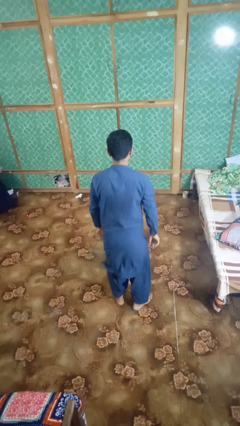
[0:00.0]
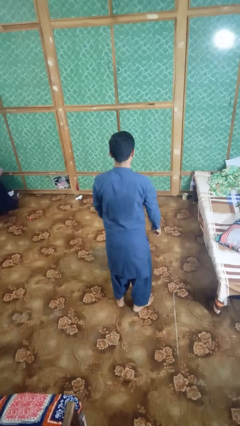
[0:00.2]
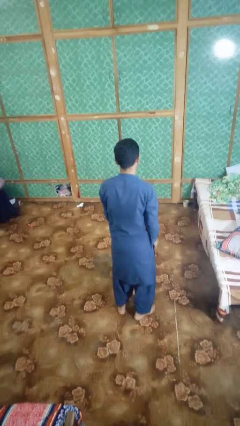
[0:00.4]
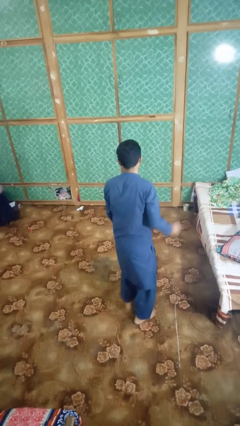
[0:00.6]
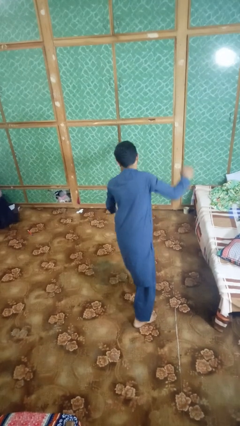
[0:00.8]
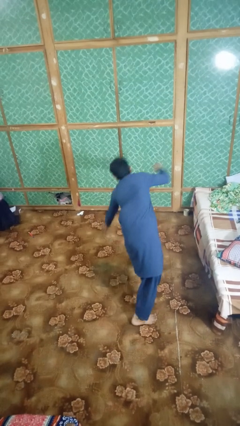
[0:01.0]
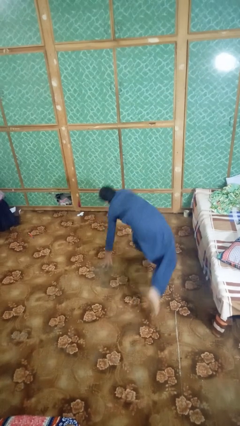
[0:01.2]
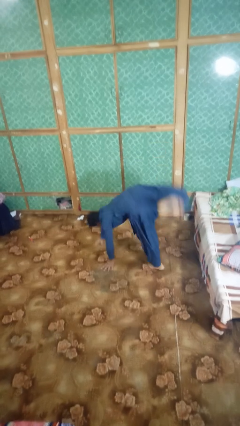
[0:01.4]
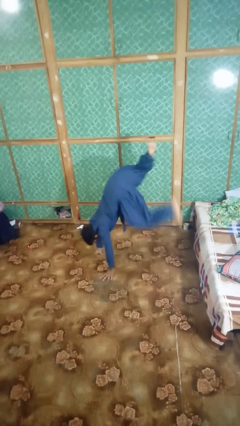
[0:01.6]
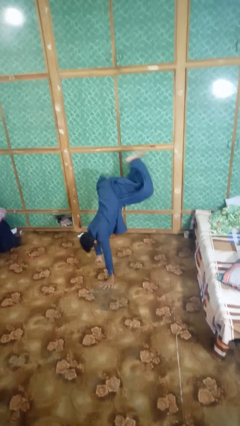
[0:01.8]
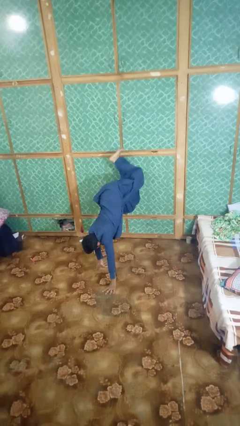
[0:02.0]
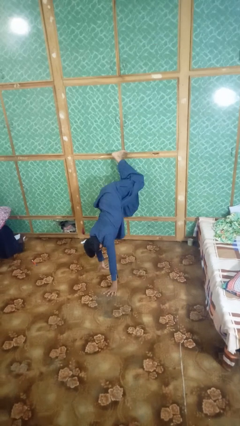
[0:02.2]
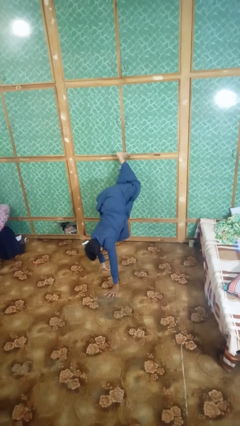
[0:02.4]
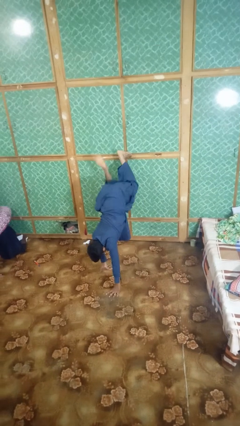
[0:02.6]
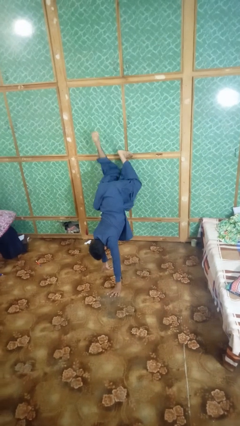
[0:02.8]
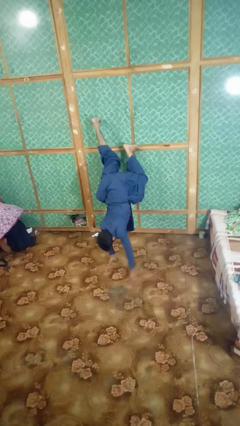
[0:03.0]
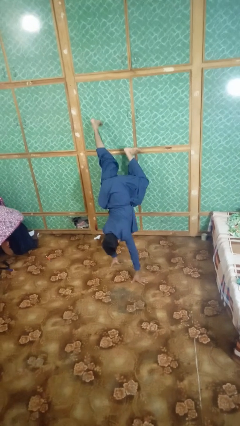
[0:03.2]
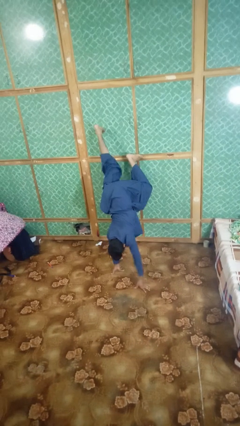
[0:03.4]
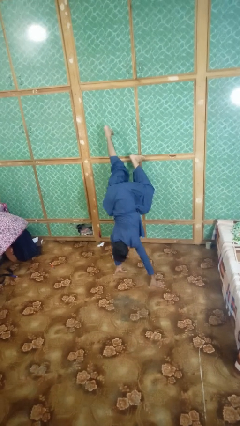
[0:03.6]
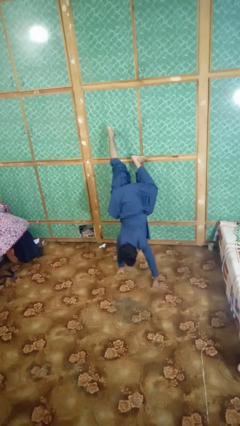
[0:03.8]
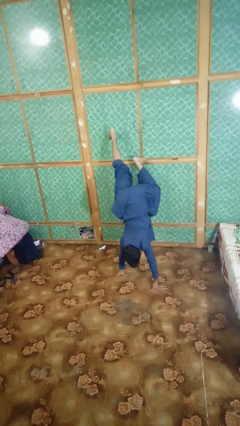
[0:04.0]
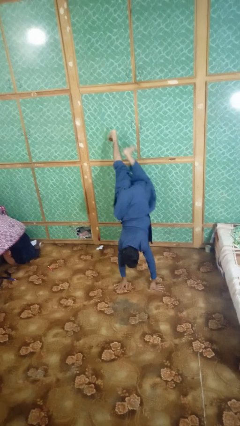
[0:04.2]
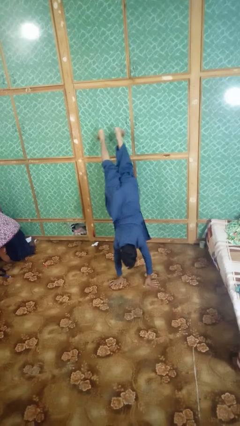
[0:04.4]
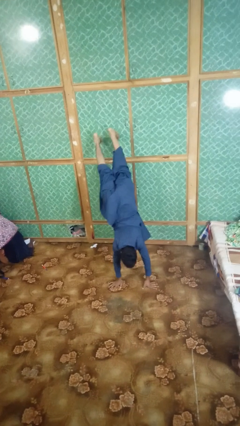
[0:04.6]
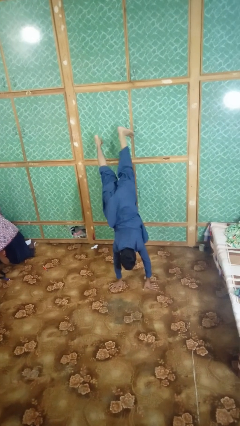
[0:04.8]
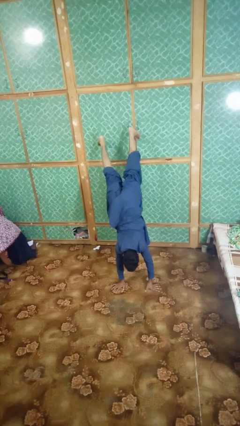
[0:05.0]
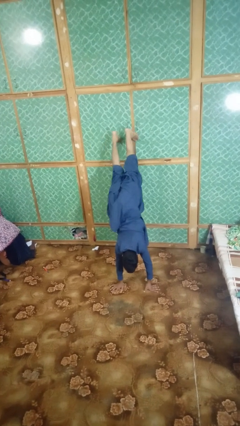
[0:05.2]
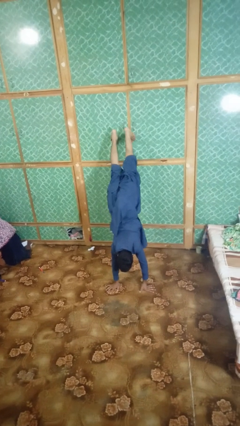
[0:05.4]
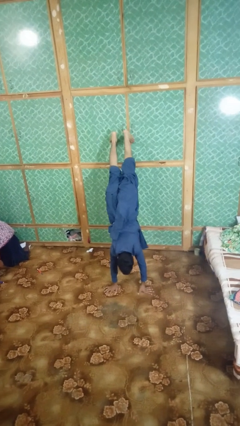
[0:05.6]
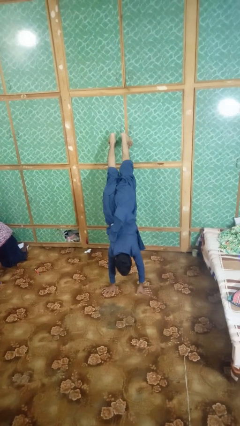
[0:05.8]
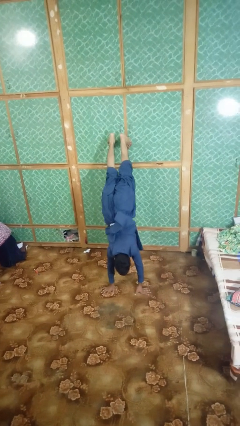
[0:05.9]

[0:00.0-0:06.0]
person handstand

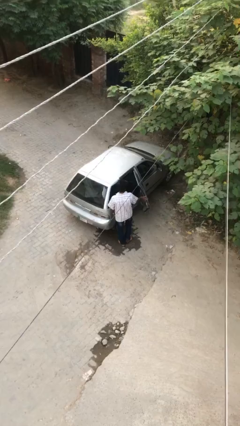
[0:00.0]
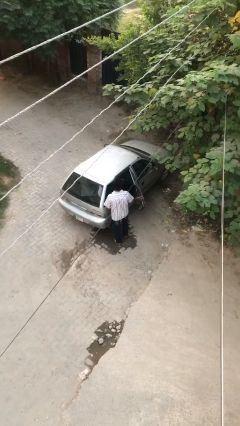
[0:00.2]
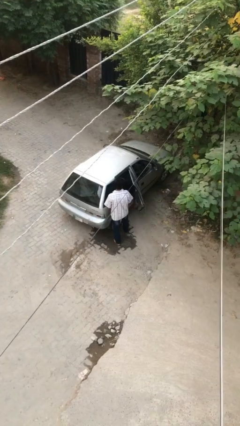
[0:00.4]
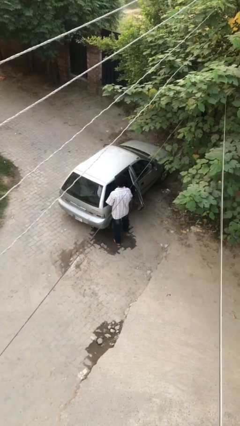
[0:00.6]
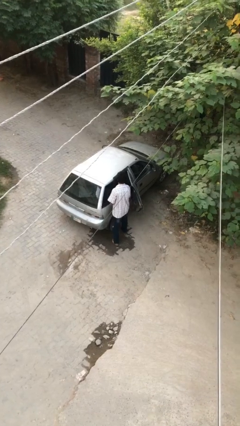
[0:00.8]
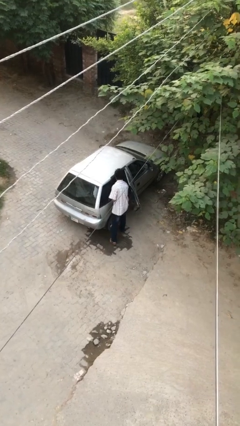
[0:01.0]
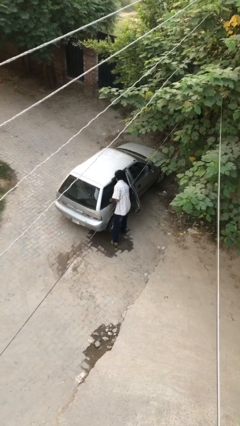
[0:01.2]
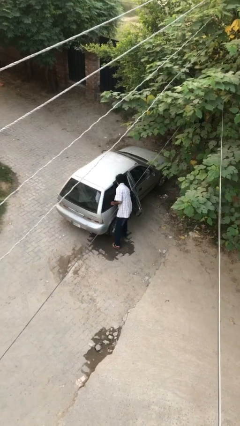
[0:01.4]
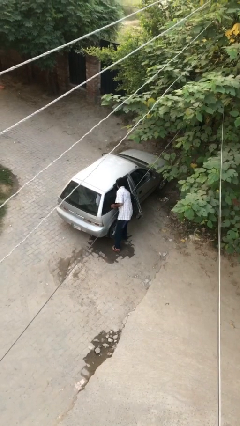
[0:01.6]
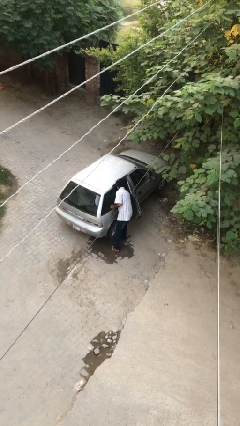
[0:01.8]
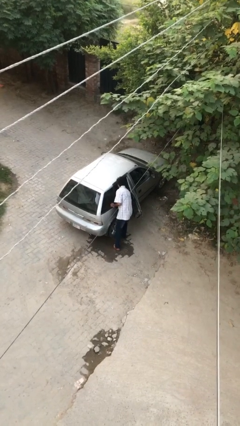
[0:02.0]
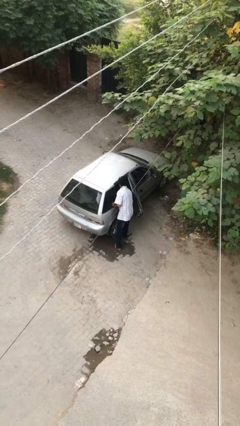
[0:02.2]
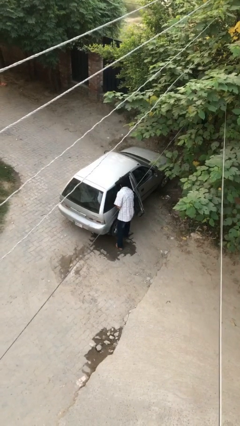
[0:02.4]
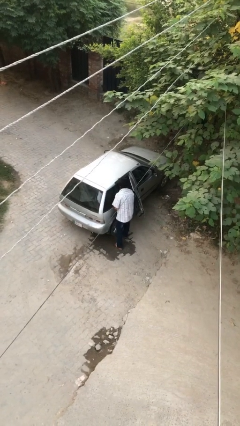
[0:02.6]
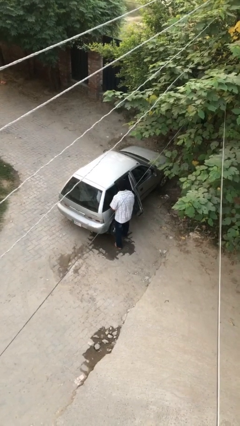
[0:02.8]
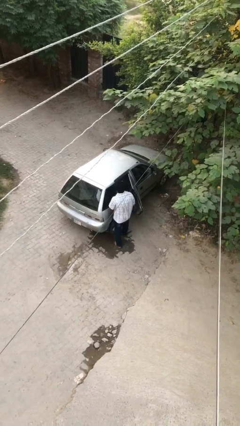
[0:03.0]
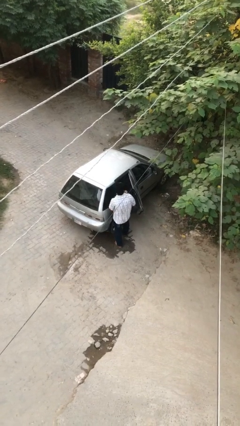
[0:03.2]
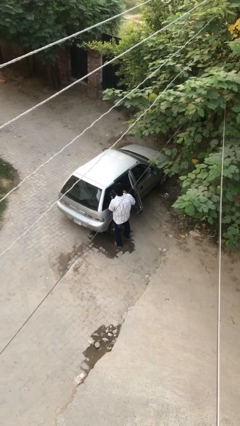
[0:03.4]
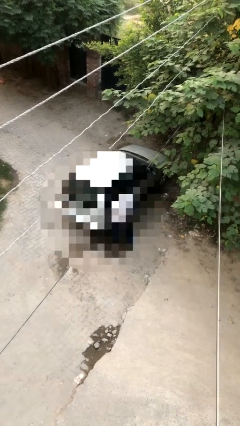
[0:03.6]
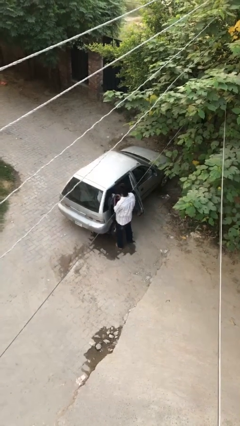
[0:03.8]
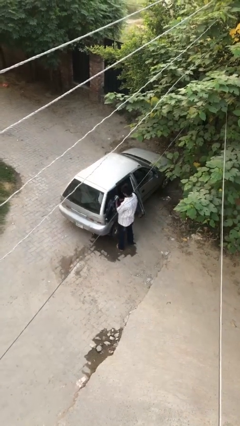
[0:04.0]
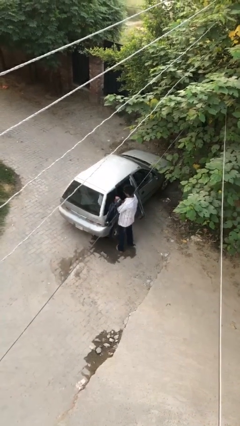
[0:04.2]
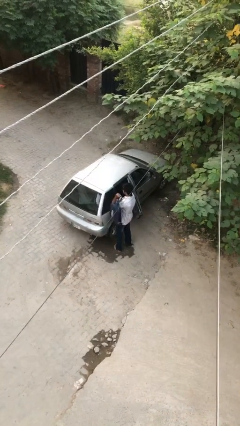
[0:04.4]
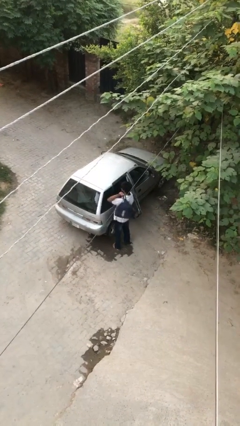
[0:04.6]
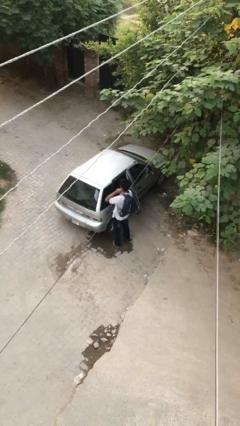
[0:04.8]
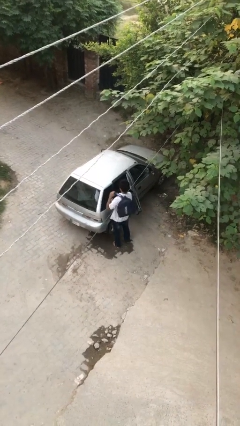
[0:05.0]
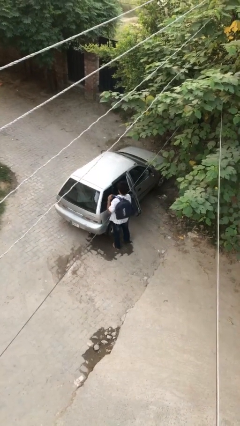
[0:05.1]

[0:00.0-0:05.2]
person unloads car

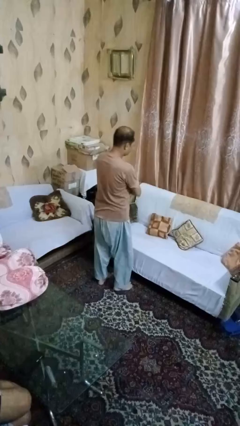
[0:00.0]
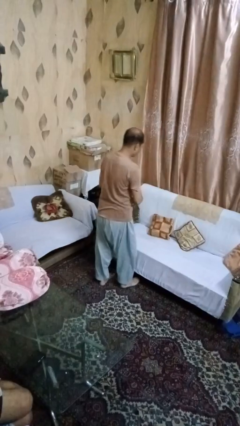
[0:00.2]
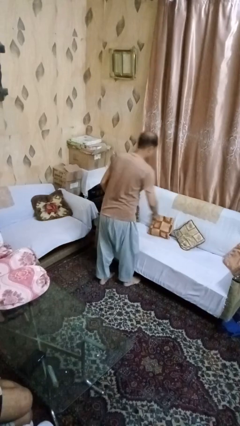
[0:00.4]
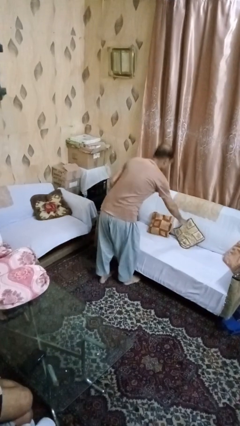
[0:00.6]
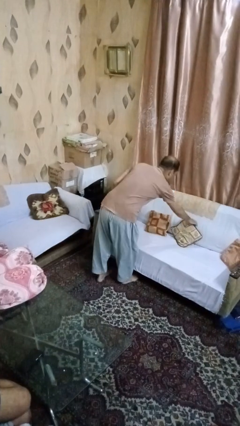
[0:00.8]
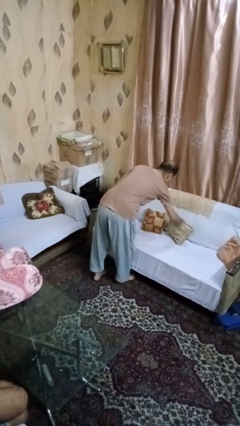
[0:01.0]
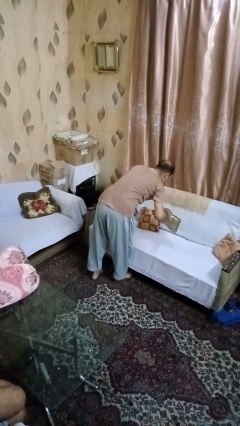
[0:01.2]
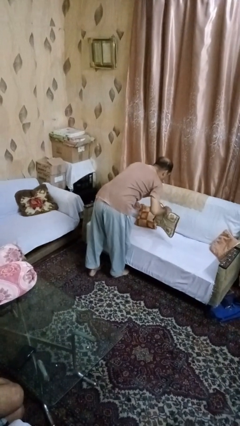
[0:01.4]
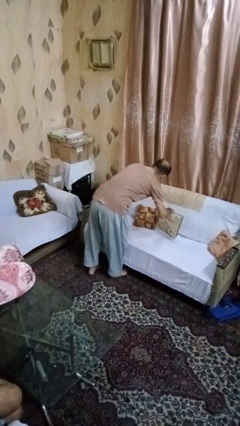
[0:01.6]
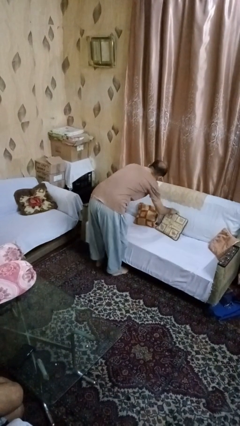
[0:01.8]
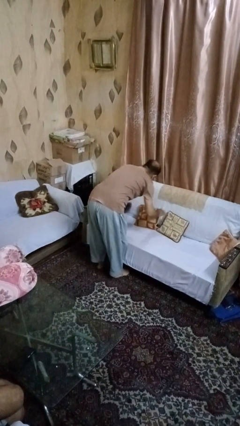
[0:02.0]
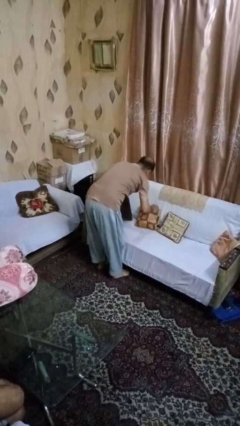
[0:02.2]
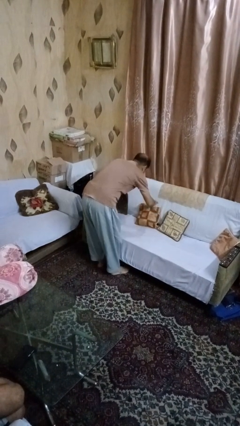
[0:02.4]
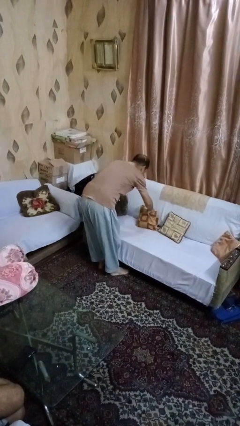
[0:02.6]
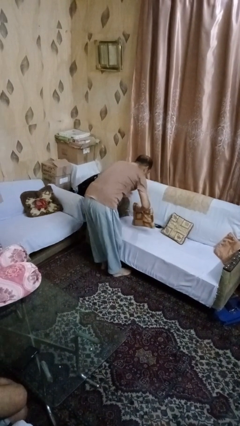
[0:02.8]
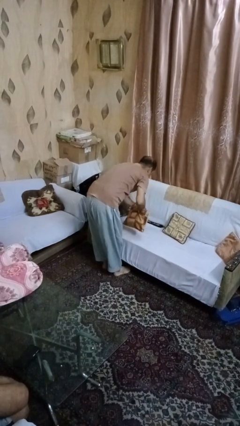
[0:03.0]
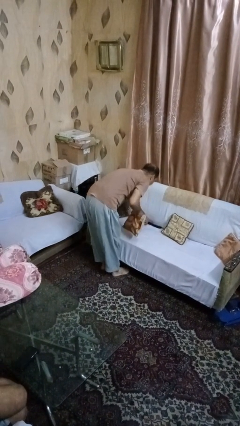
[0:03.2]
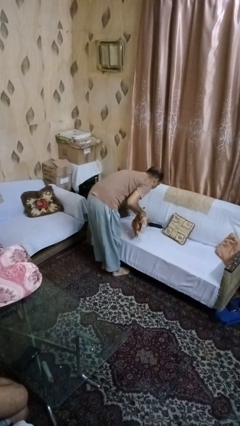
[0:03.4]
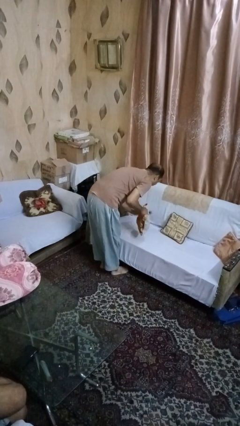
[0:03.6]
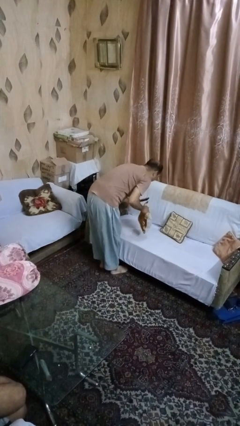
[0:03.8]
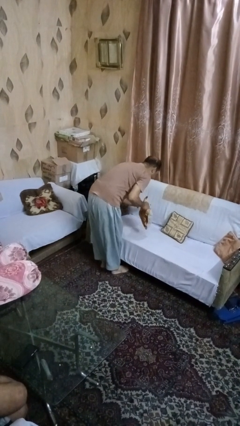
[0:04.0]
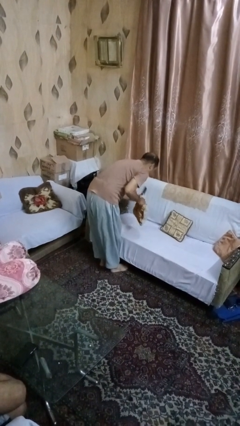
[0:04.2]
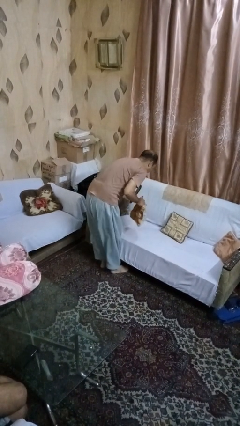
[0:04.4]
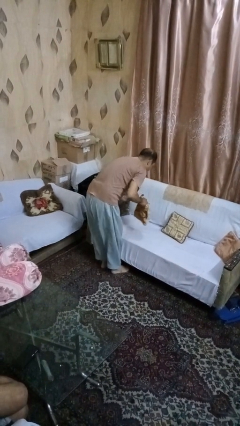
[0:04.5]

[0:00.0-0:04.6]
person searches in couch

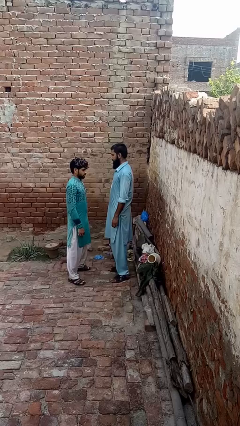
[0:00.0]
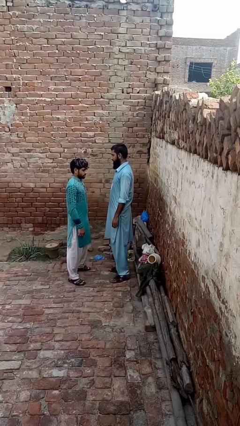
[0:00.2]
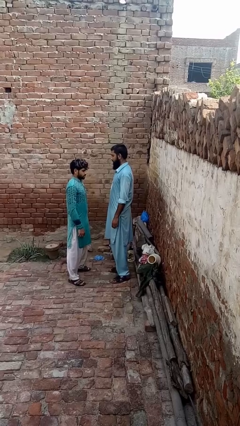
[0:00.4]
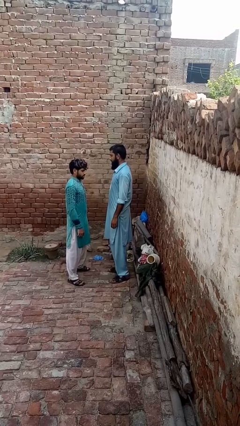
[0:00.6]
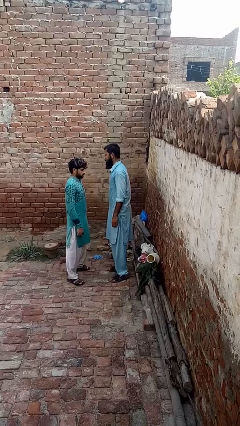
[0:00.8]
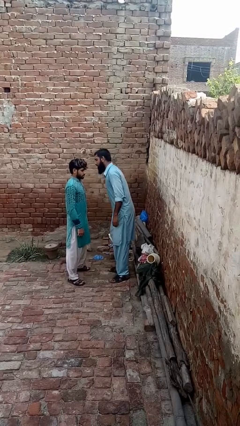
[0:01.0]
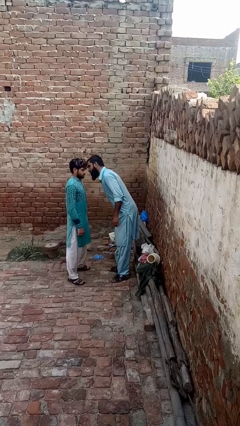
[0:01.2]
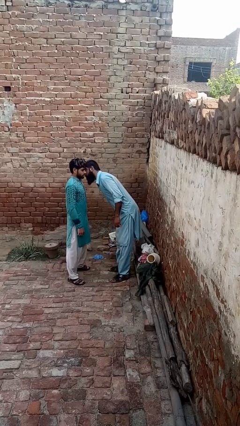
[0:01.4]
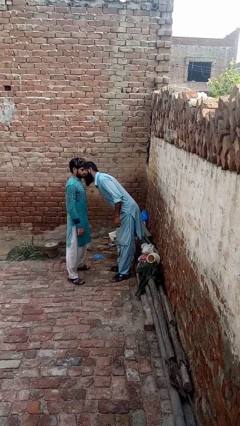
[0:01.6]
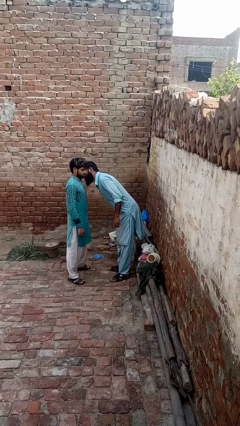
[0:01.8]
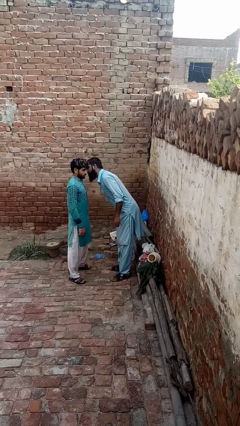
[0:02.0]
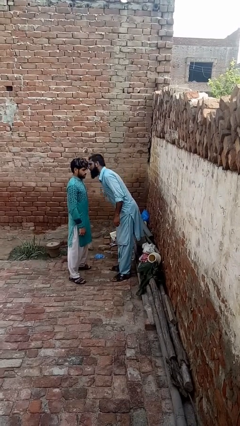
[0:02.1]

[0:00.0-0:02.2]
person kisses cheek of person
